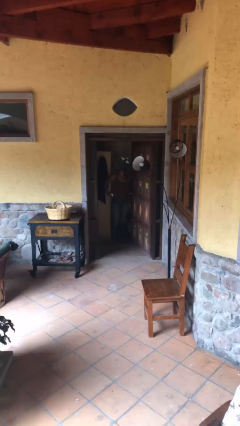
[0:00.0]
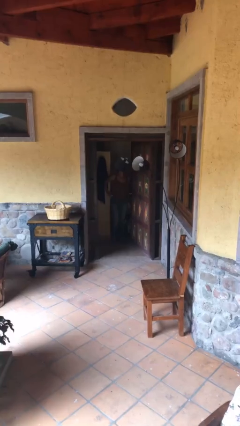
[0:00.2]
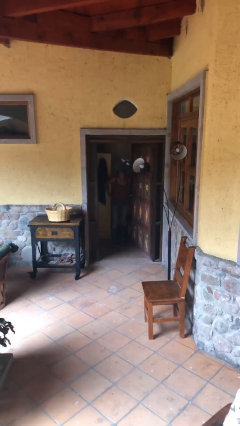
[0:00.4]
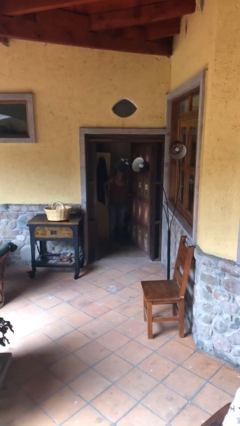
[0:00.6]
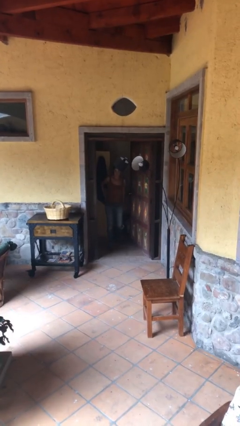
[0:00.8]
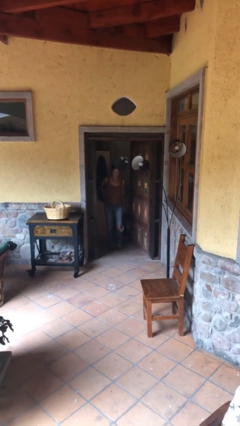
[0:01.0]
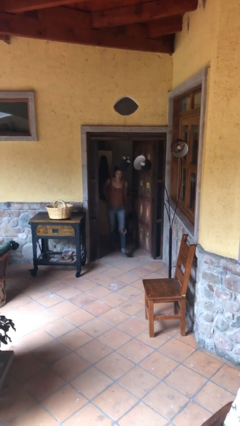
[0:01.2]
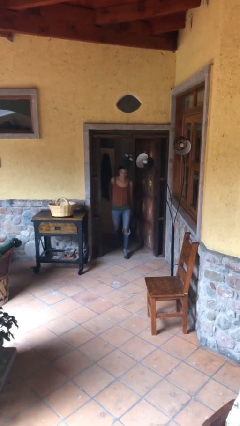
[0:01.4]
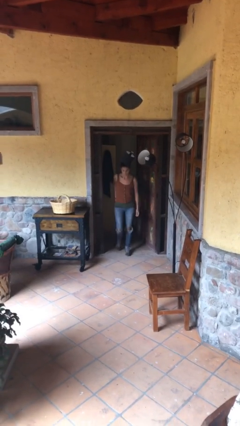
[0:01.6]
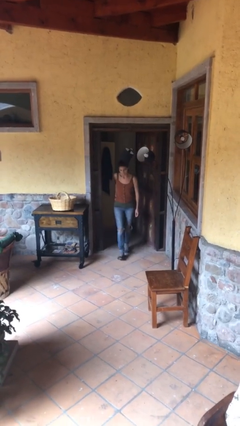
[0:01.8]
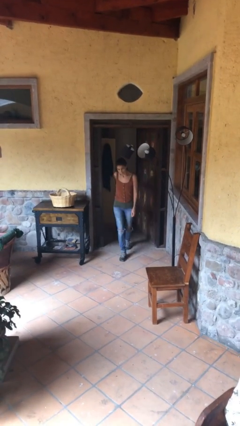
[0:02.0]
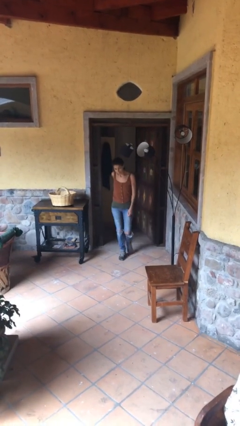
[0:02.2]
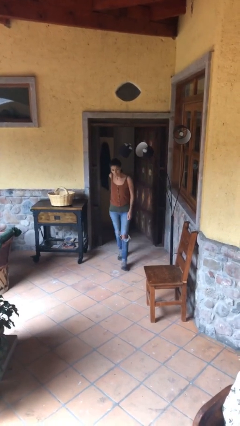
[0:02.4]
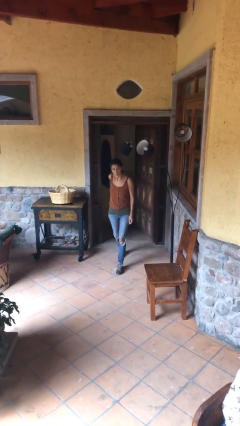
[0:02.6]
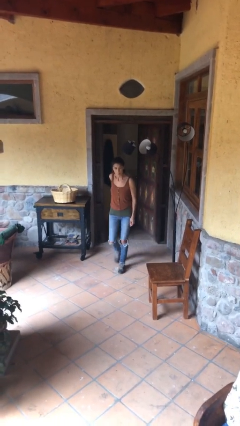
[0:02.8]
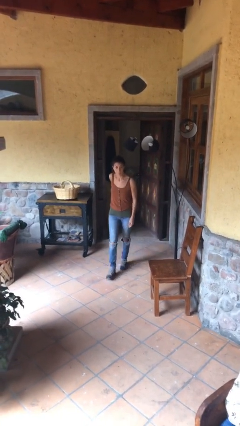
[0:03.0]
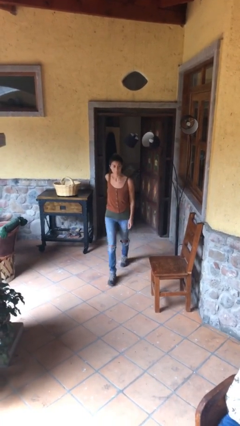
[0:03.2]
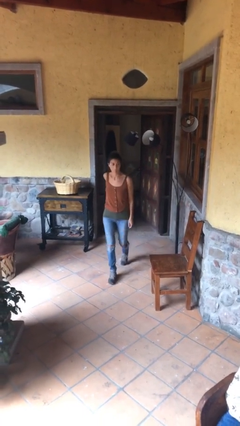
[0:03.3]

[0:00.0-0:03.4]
person enters scene through structure

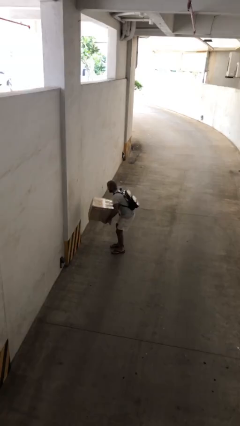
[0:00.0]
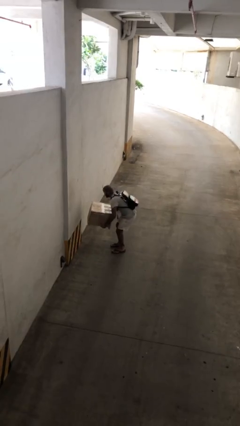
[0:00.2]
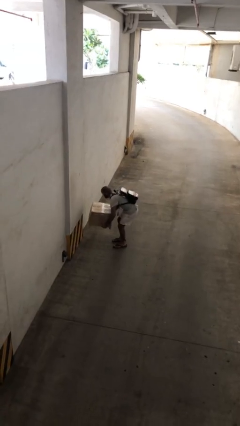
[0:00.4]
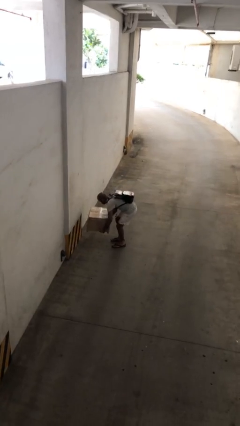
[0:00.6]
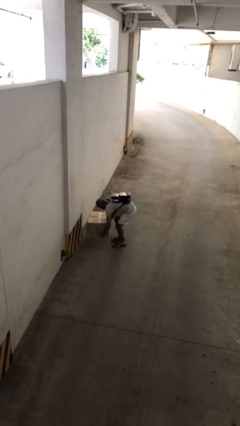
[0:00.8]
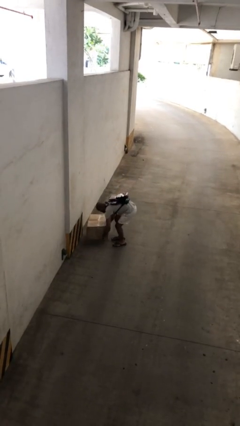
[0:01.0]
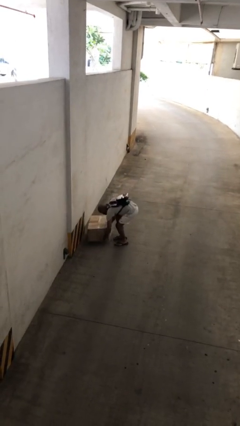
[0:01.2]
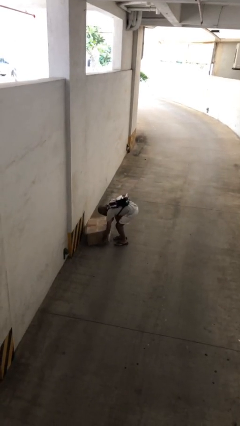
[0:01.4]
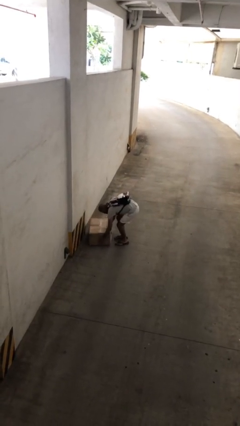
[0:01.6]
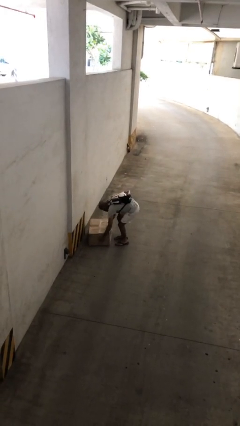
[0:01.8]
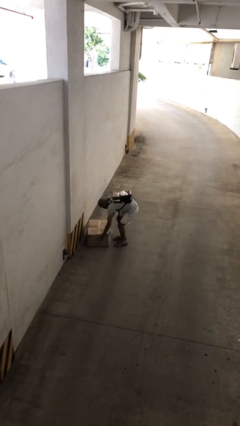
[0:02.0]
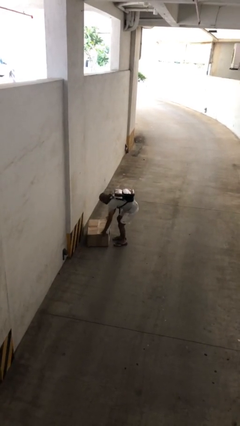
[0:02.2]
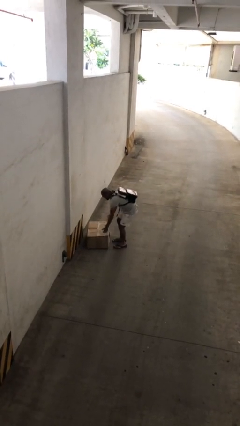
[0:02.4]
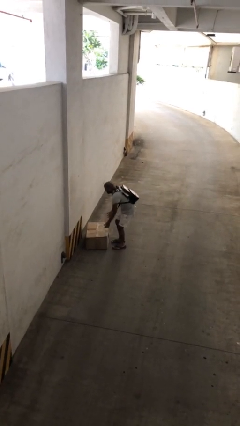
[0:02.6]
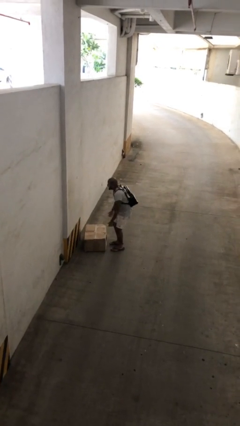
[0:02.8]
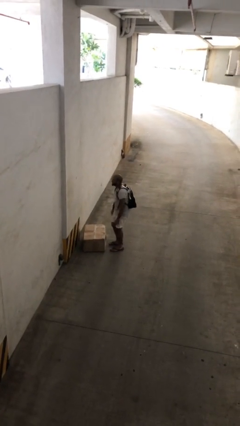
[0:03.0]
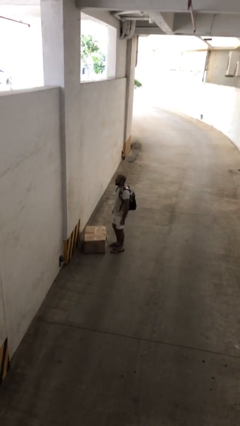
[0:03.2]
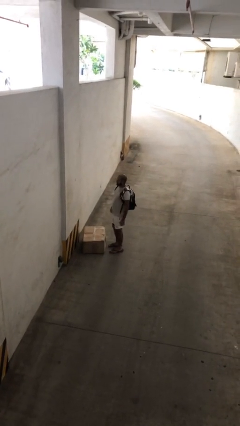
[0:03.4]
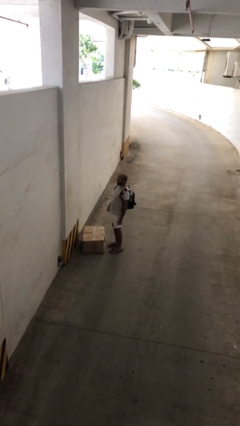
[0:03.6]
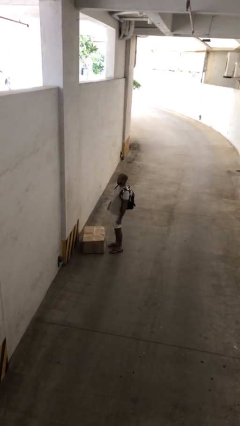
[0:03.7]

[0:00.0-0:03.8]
person puts down object on floor

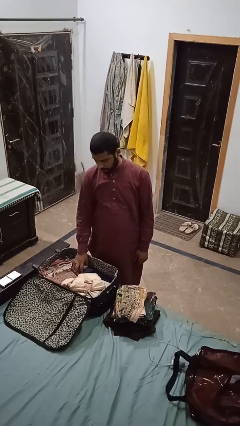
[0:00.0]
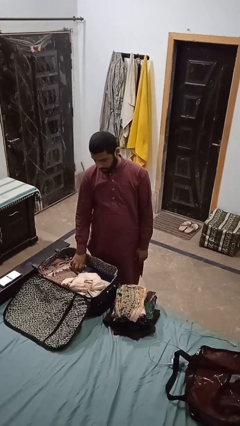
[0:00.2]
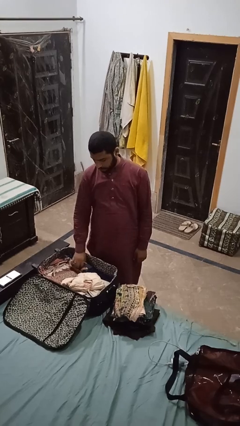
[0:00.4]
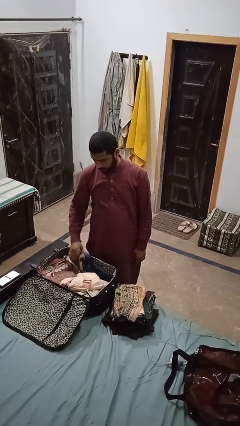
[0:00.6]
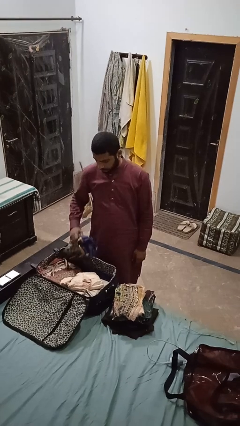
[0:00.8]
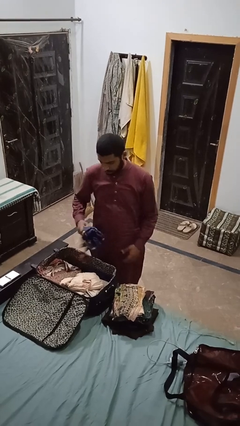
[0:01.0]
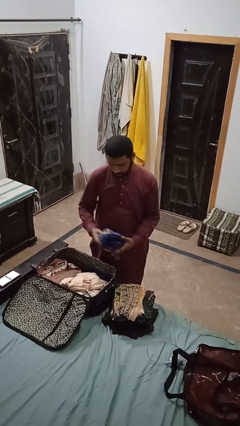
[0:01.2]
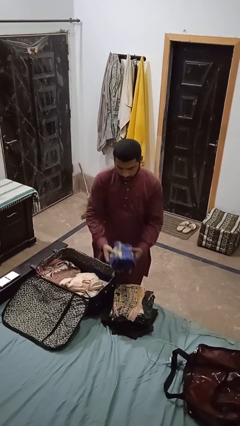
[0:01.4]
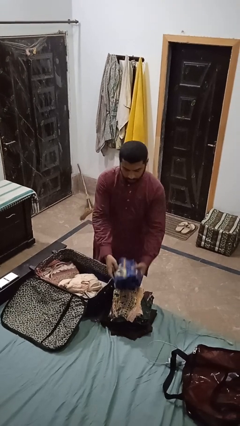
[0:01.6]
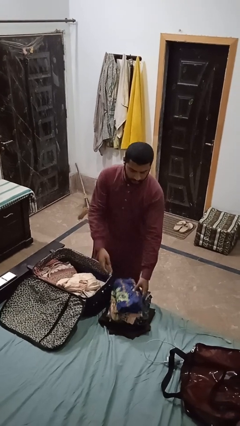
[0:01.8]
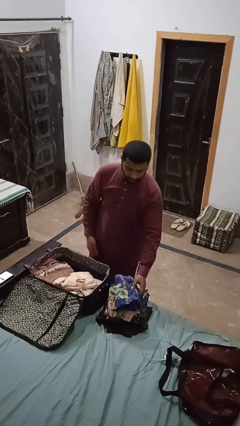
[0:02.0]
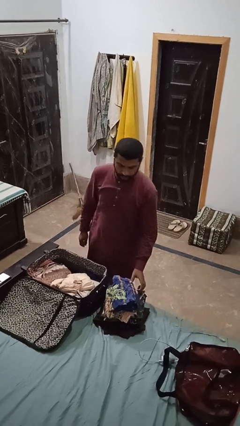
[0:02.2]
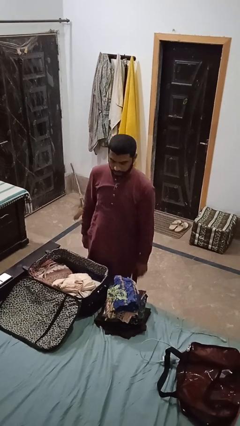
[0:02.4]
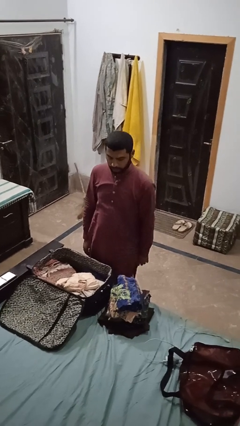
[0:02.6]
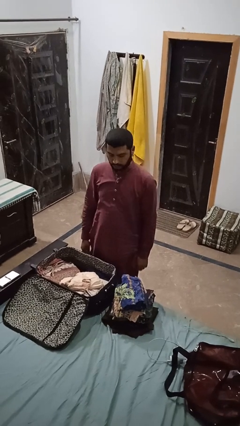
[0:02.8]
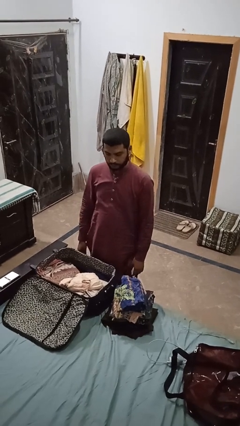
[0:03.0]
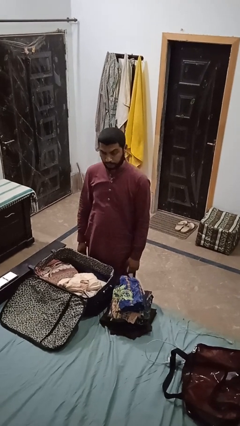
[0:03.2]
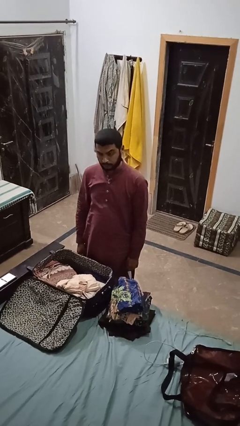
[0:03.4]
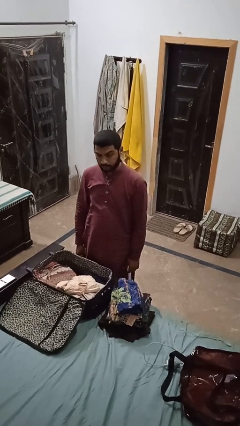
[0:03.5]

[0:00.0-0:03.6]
person unloads clothes from suitcase

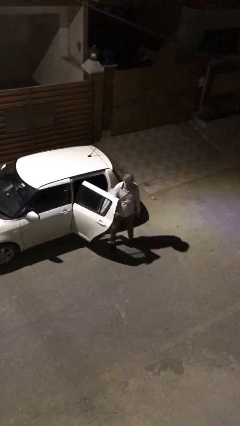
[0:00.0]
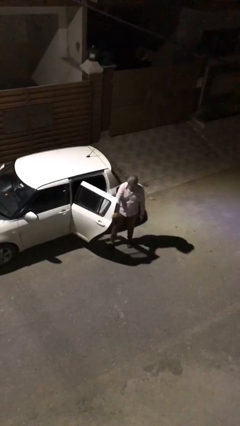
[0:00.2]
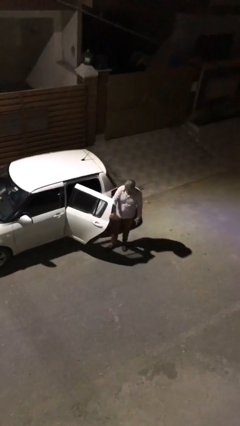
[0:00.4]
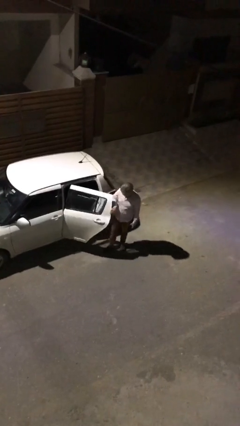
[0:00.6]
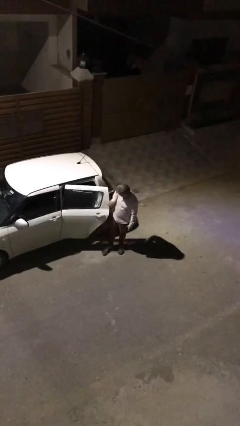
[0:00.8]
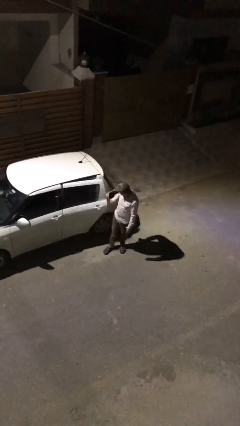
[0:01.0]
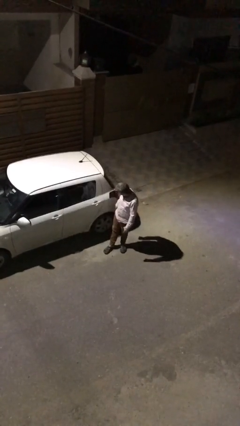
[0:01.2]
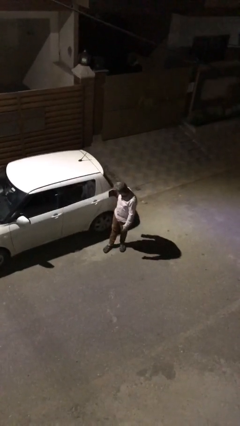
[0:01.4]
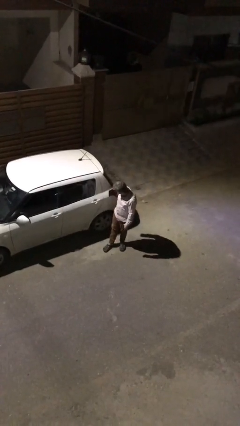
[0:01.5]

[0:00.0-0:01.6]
person closes car door

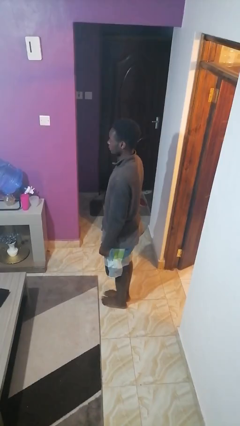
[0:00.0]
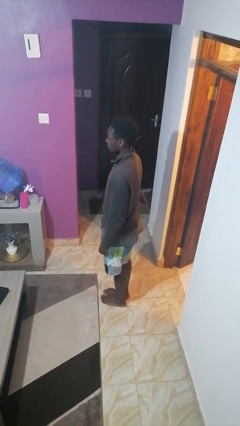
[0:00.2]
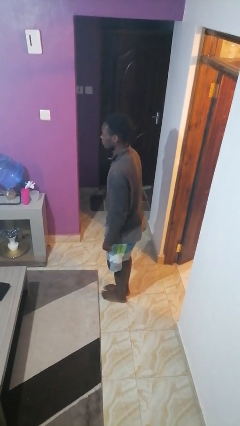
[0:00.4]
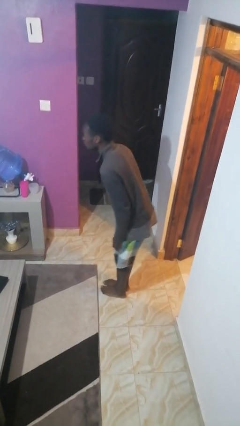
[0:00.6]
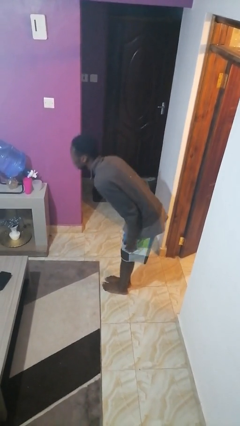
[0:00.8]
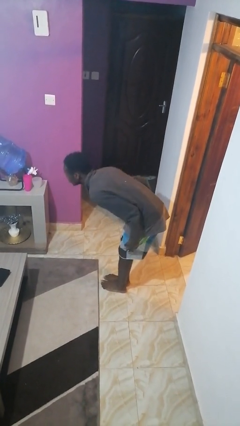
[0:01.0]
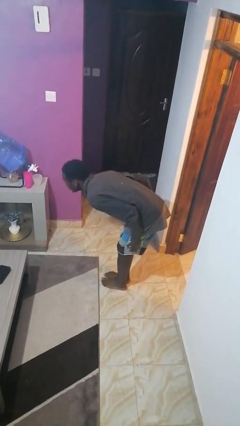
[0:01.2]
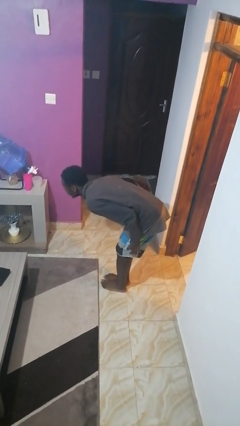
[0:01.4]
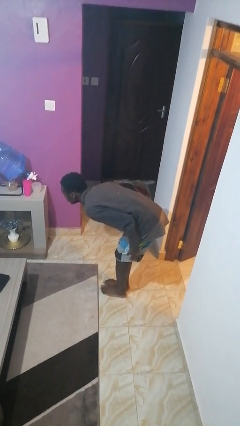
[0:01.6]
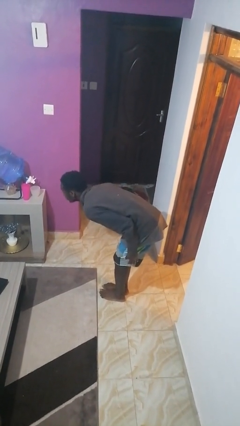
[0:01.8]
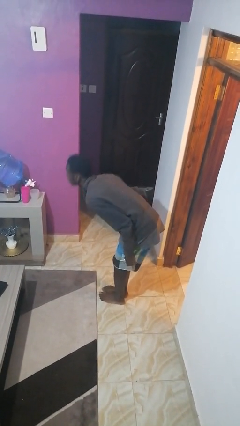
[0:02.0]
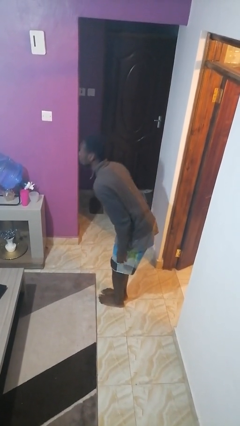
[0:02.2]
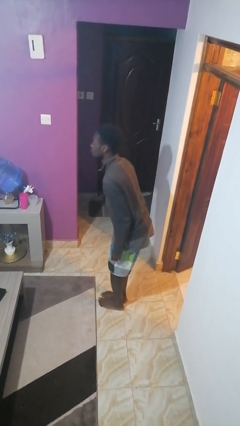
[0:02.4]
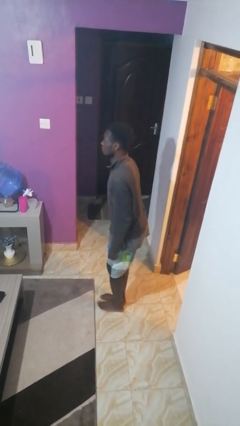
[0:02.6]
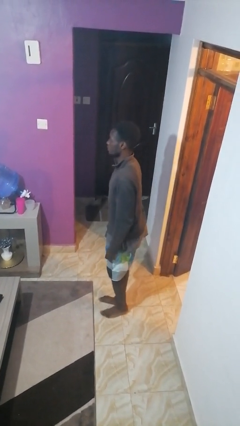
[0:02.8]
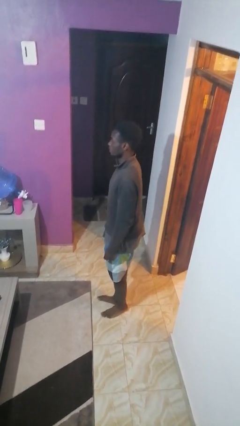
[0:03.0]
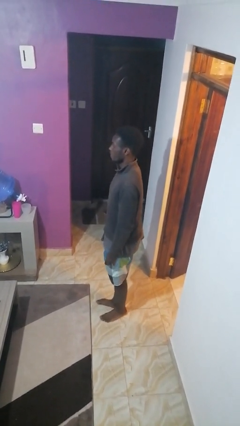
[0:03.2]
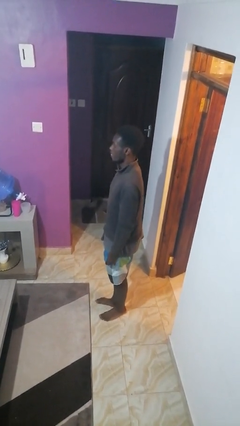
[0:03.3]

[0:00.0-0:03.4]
person bows

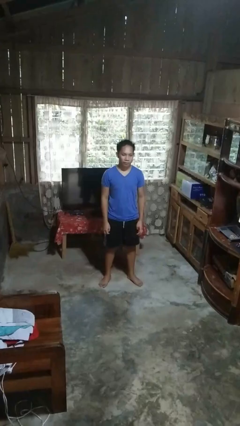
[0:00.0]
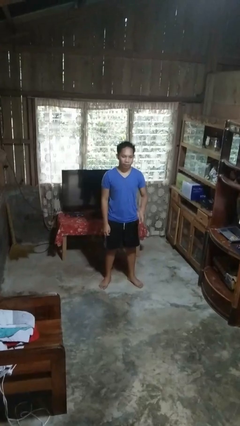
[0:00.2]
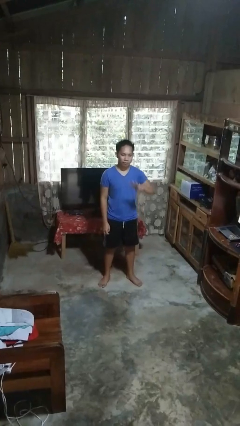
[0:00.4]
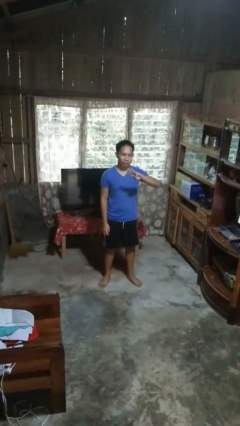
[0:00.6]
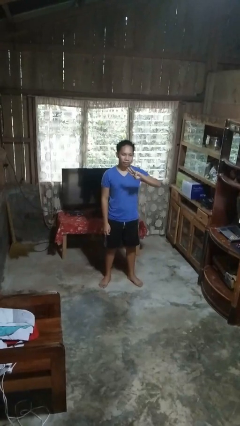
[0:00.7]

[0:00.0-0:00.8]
person gestures number three

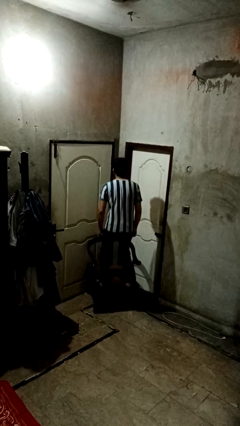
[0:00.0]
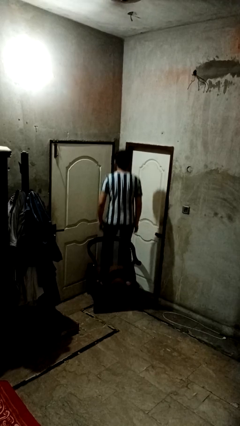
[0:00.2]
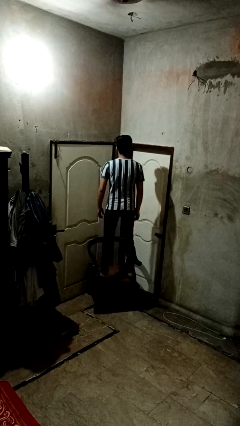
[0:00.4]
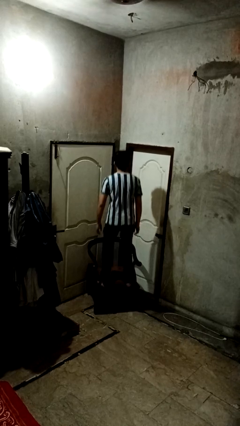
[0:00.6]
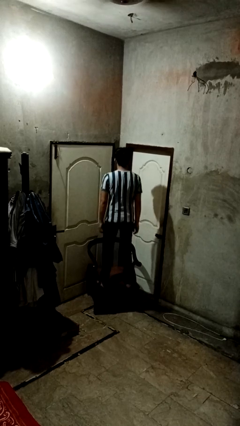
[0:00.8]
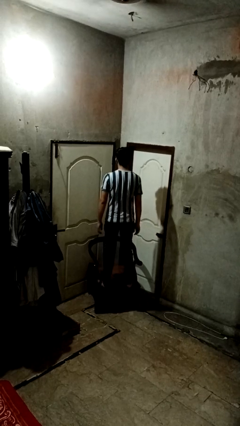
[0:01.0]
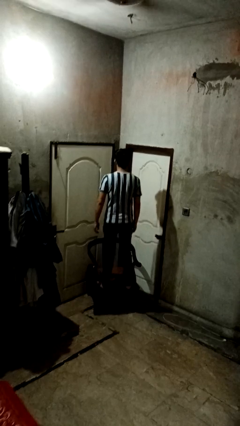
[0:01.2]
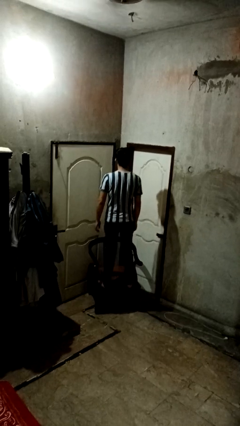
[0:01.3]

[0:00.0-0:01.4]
person jumps on couch
